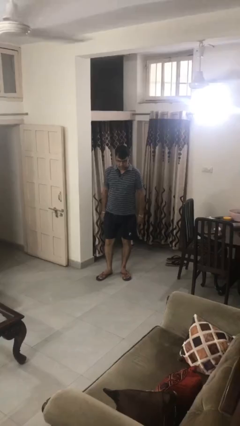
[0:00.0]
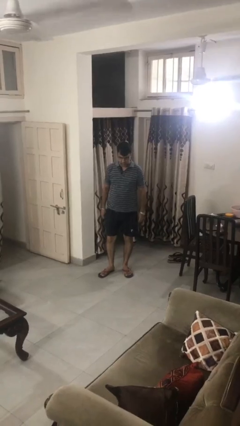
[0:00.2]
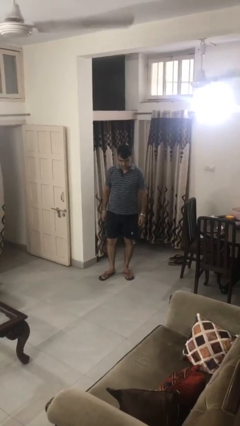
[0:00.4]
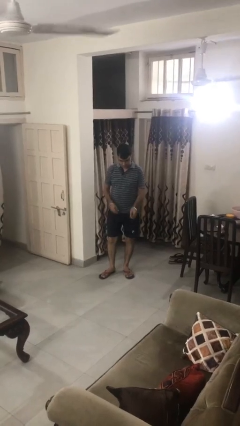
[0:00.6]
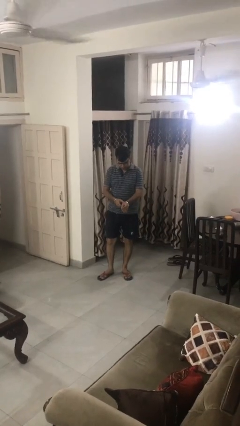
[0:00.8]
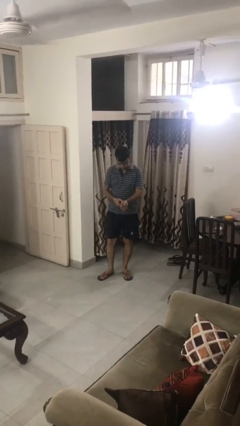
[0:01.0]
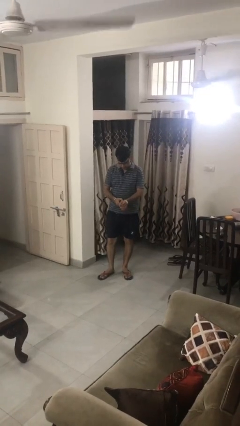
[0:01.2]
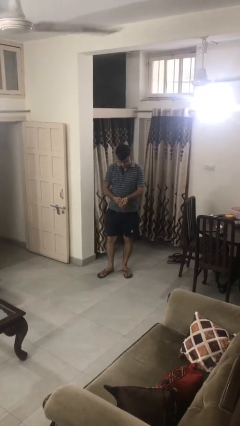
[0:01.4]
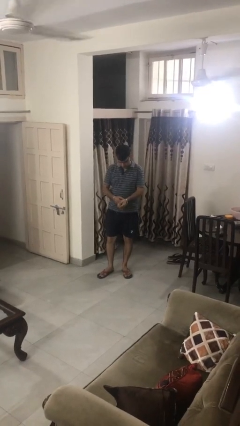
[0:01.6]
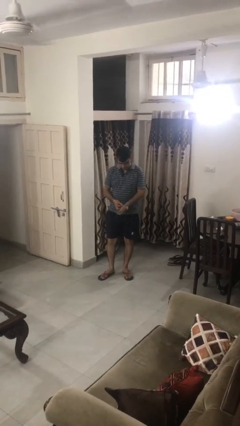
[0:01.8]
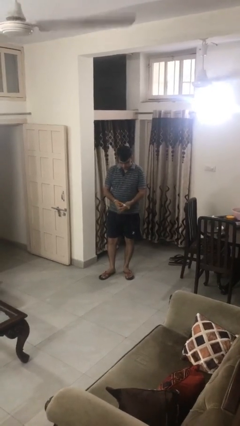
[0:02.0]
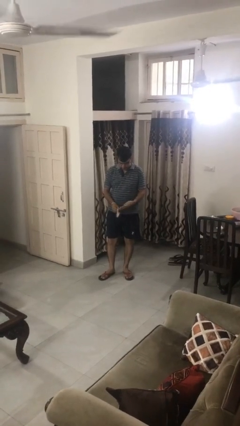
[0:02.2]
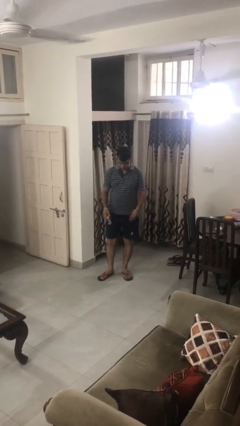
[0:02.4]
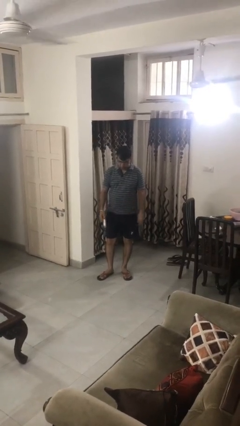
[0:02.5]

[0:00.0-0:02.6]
person takes off wristwatch

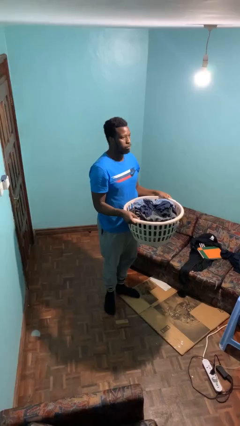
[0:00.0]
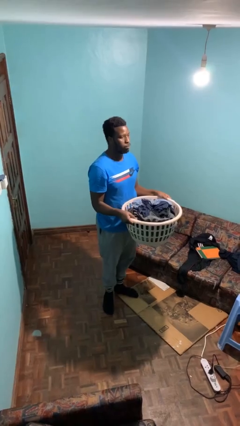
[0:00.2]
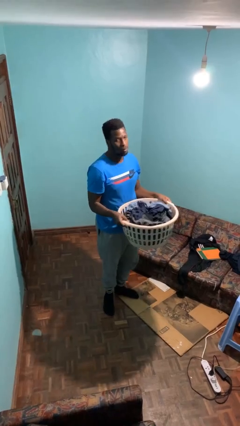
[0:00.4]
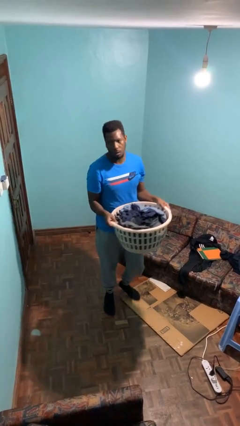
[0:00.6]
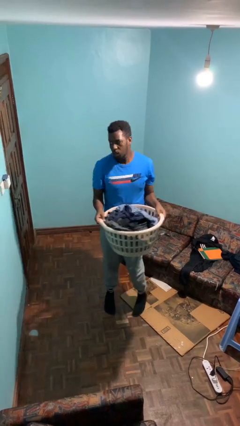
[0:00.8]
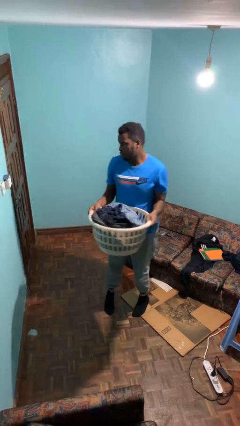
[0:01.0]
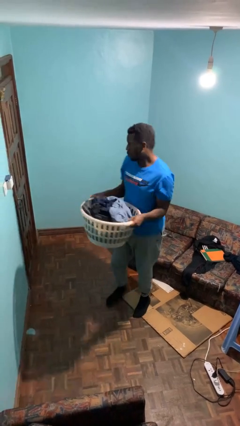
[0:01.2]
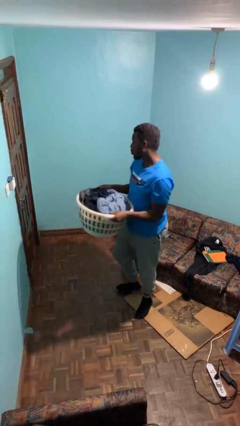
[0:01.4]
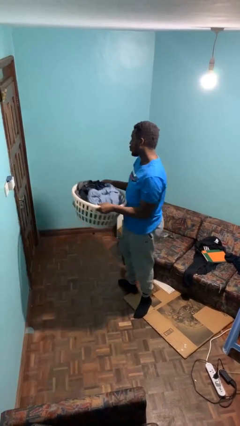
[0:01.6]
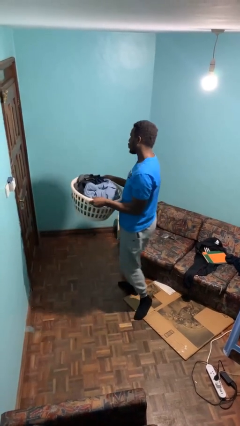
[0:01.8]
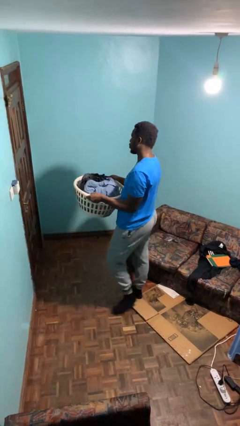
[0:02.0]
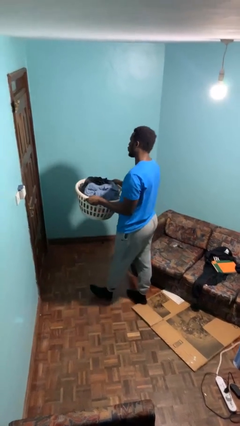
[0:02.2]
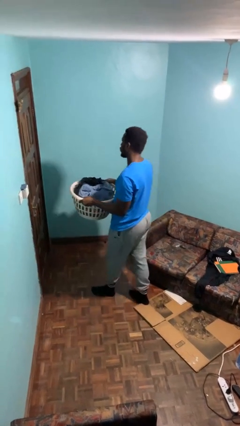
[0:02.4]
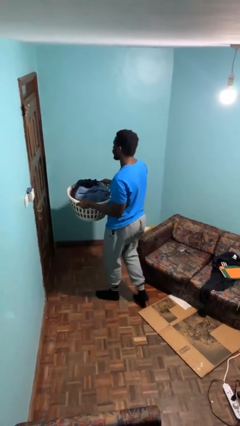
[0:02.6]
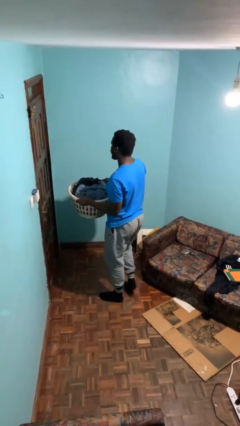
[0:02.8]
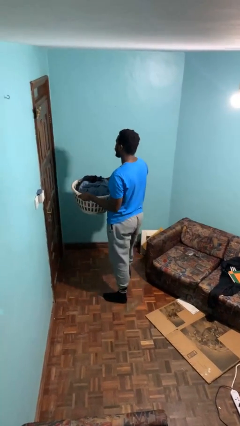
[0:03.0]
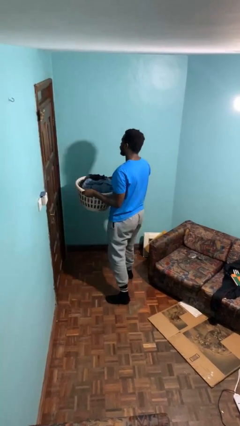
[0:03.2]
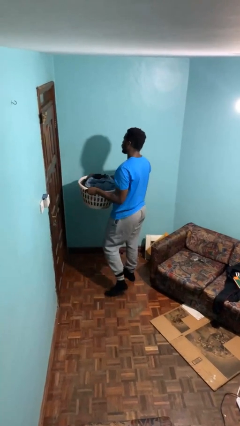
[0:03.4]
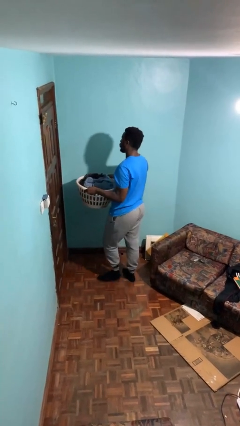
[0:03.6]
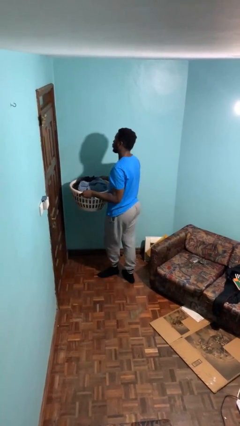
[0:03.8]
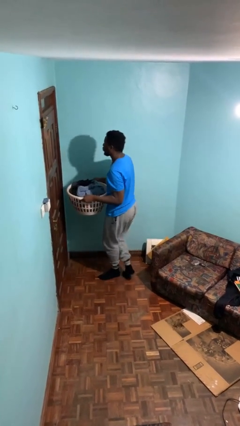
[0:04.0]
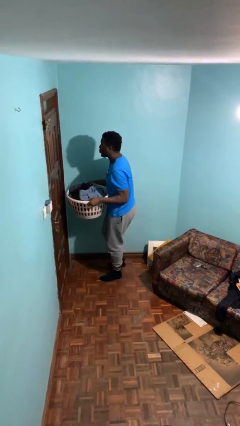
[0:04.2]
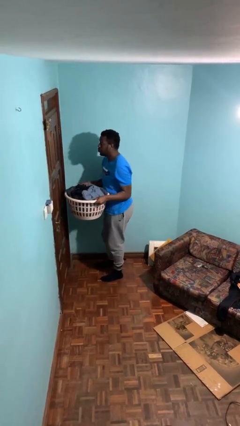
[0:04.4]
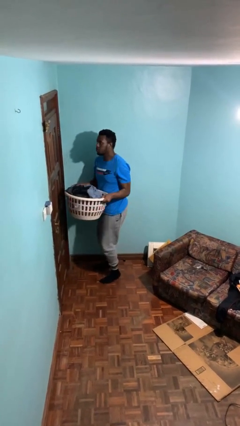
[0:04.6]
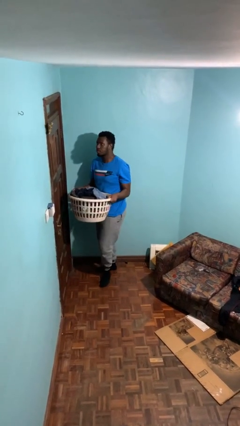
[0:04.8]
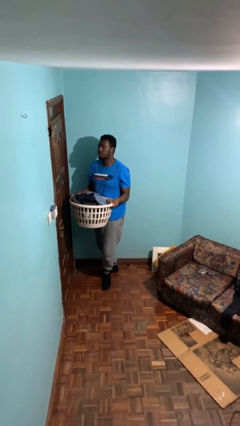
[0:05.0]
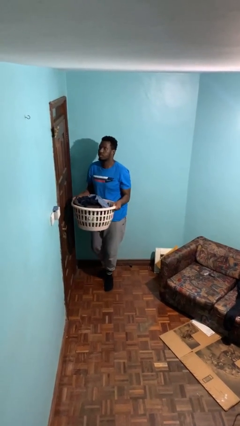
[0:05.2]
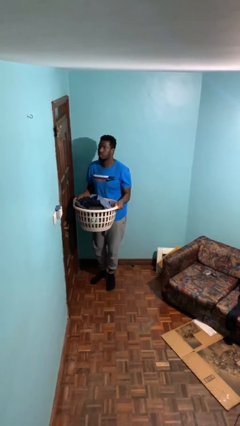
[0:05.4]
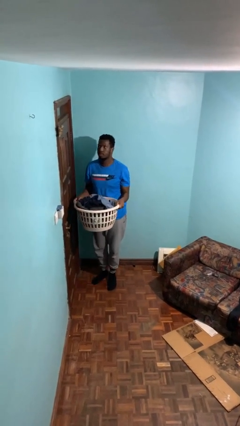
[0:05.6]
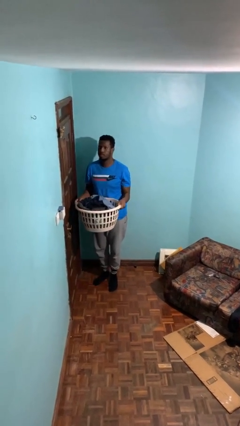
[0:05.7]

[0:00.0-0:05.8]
person carries laundry basket

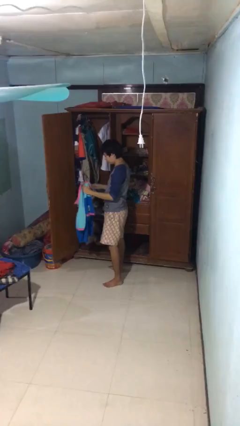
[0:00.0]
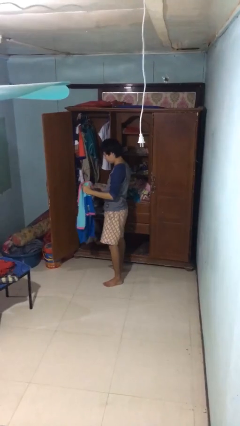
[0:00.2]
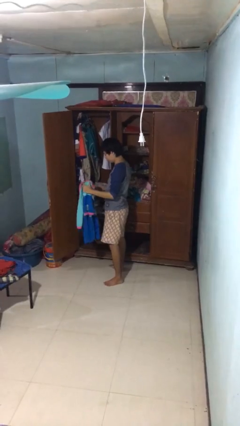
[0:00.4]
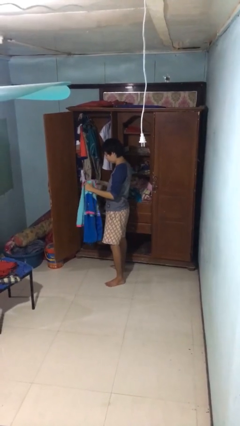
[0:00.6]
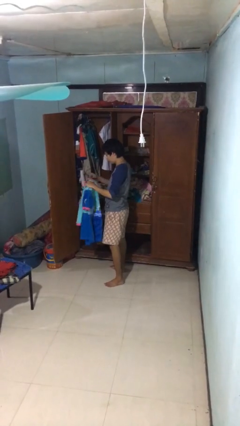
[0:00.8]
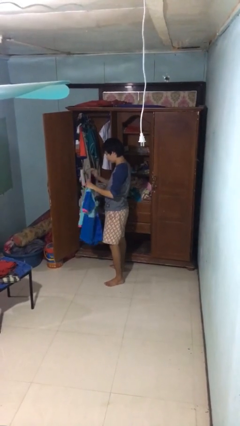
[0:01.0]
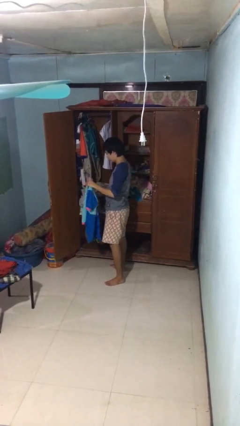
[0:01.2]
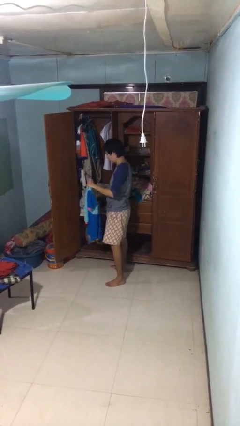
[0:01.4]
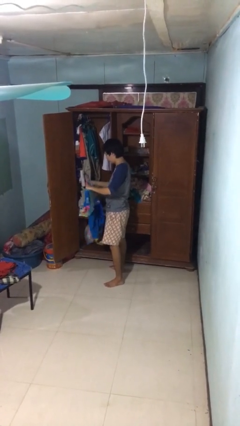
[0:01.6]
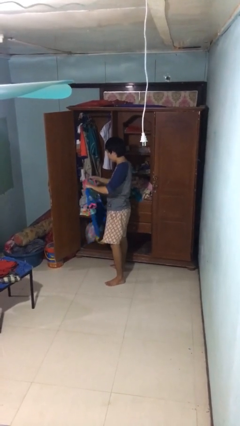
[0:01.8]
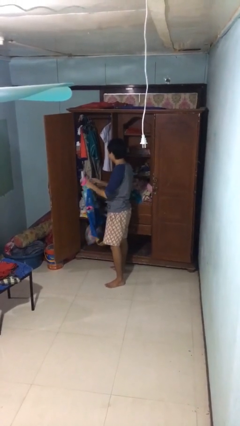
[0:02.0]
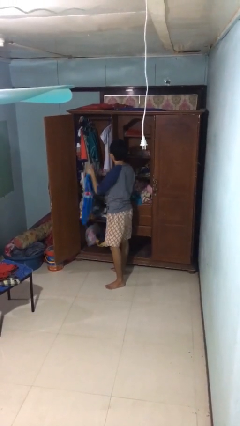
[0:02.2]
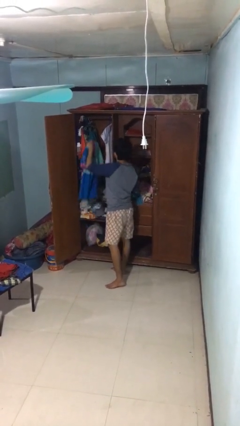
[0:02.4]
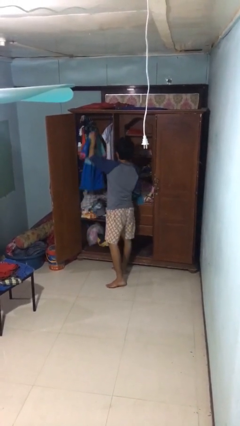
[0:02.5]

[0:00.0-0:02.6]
person puts clothes into closet

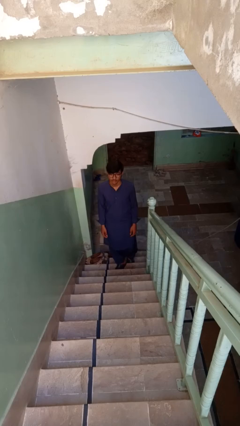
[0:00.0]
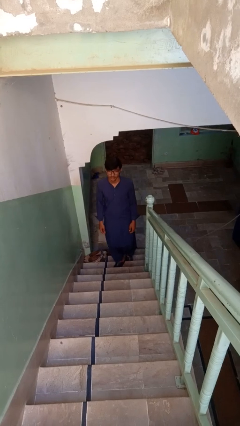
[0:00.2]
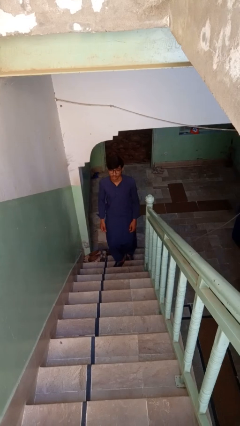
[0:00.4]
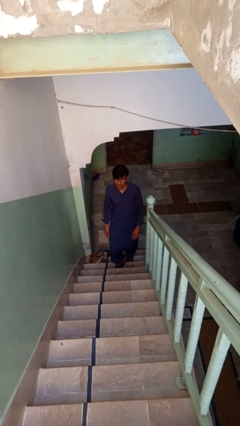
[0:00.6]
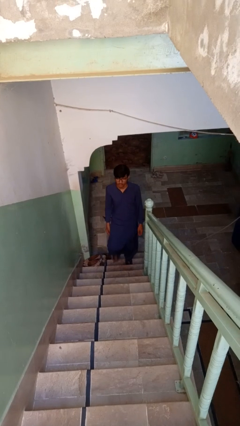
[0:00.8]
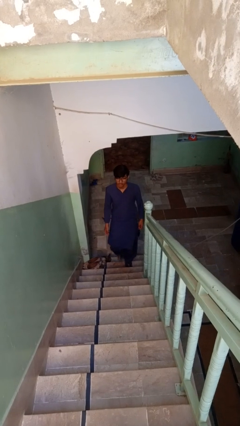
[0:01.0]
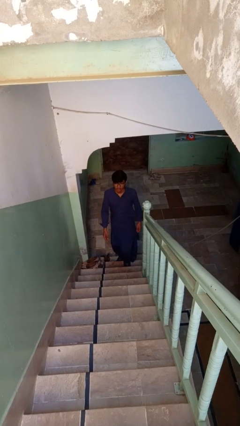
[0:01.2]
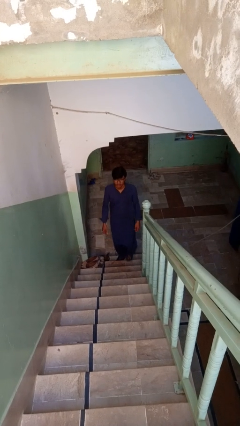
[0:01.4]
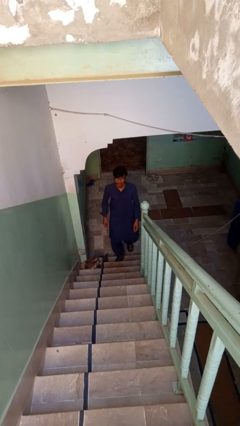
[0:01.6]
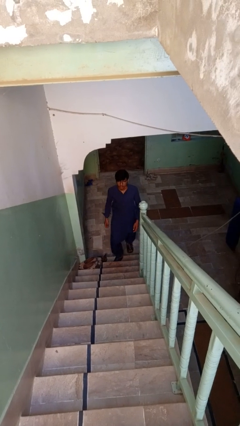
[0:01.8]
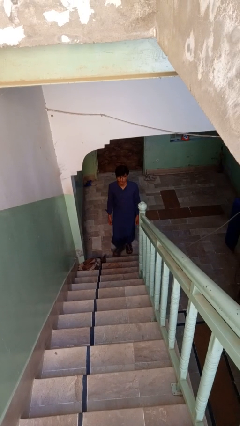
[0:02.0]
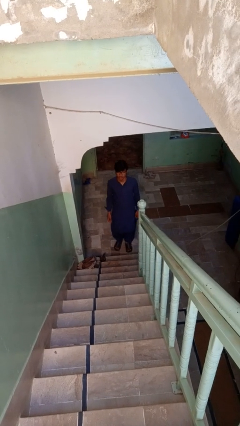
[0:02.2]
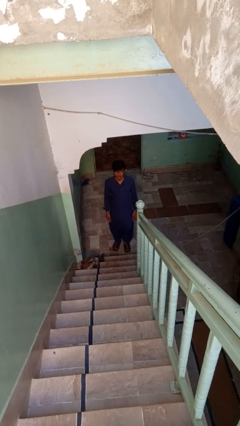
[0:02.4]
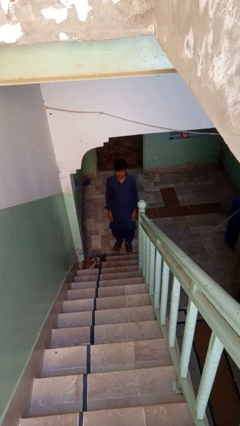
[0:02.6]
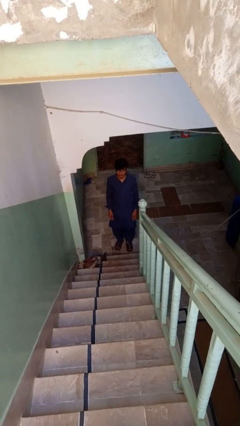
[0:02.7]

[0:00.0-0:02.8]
person climbs down stairs

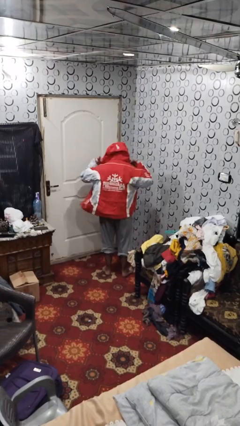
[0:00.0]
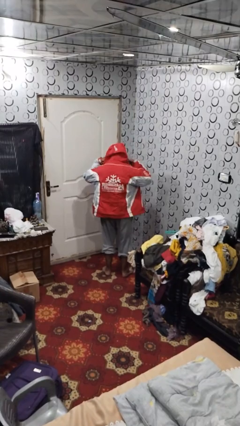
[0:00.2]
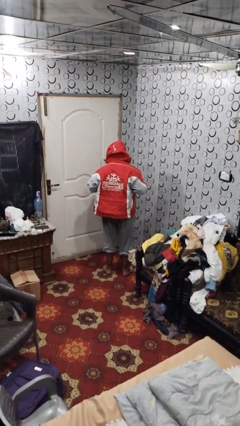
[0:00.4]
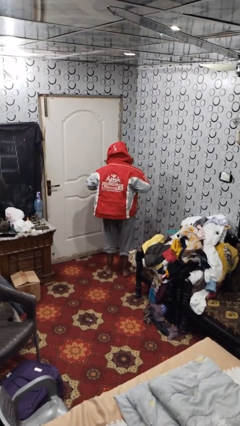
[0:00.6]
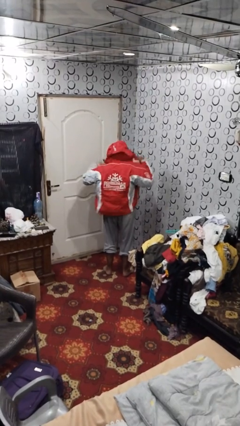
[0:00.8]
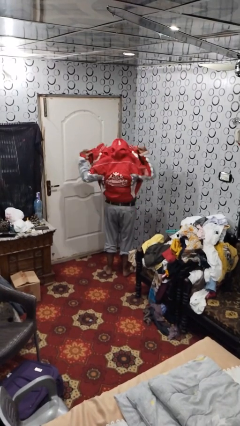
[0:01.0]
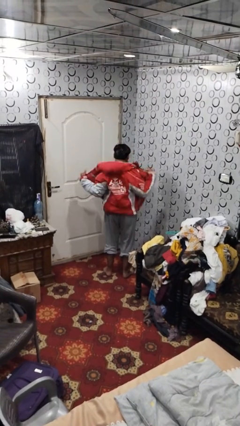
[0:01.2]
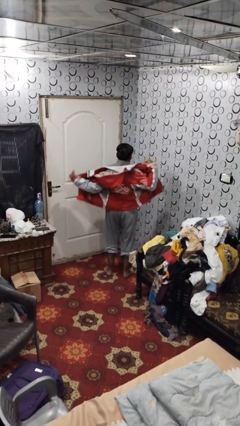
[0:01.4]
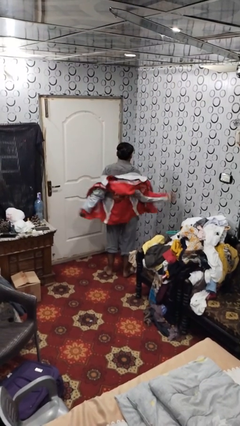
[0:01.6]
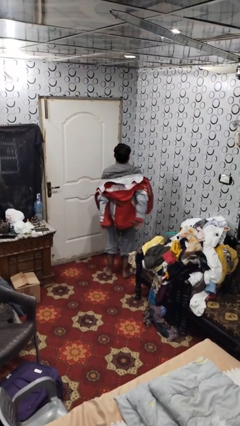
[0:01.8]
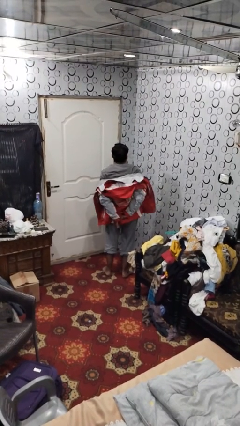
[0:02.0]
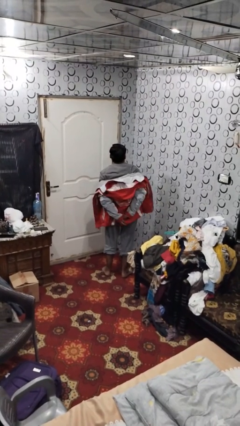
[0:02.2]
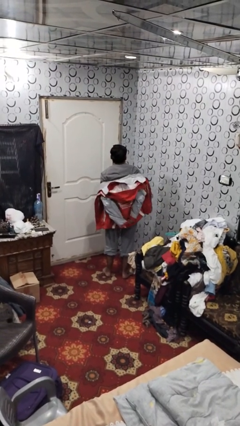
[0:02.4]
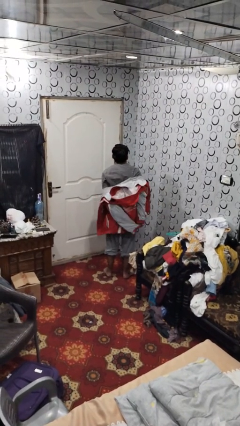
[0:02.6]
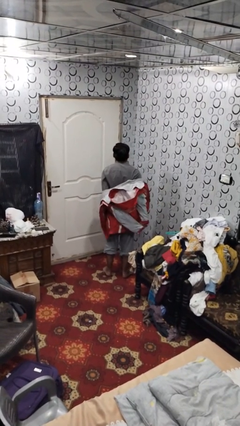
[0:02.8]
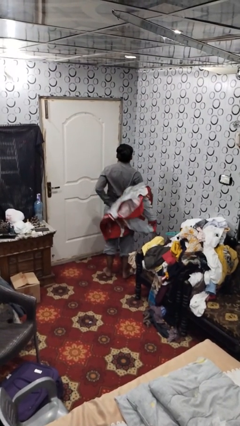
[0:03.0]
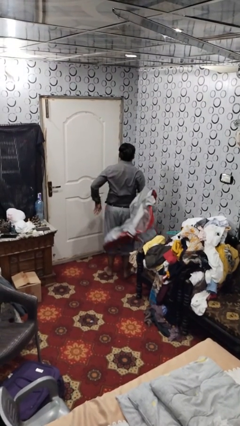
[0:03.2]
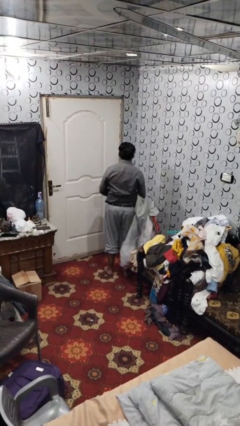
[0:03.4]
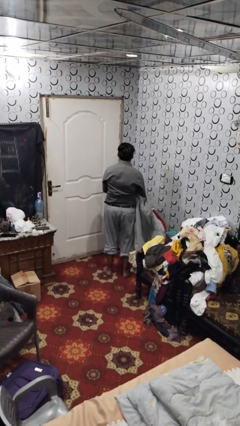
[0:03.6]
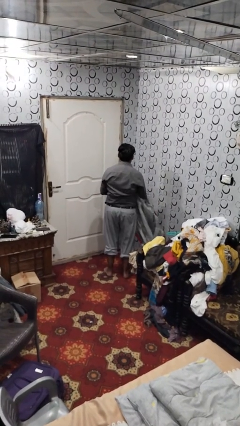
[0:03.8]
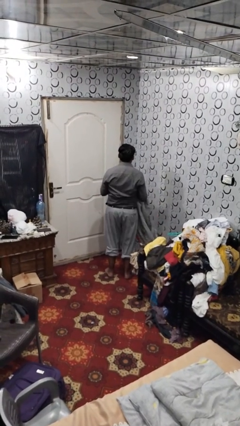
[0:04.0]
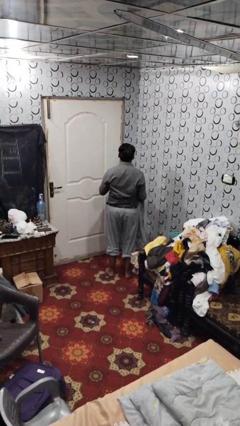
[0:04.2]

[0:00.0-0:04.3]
person takes off hoodie
